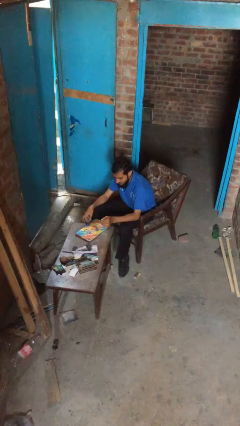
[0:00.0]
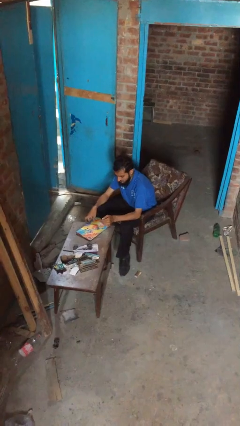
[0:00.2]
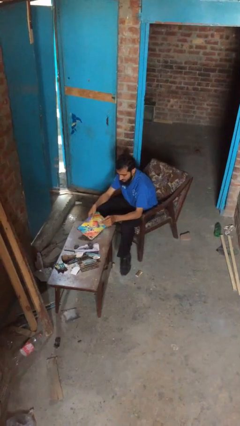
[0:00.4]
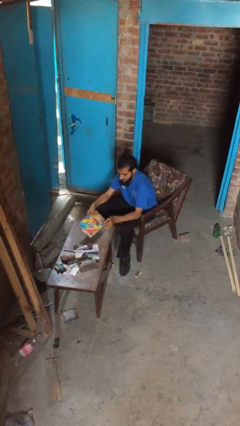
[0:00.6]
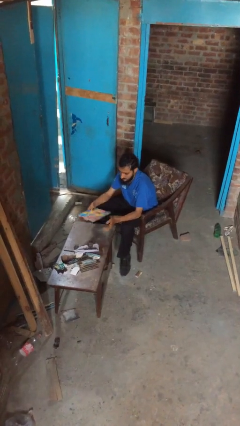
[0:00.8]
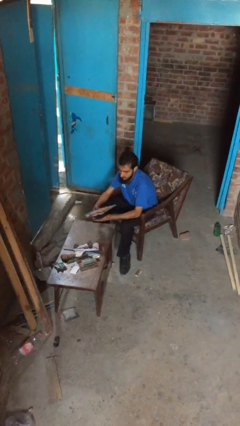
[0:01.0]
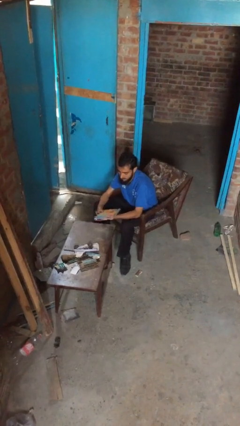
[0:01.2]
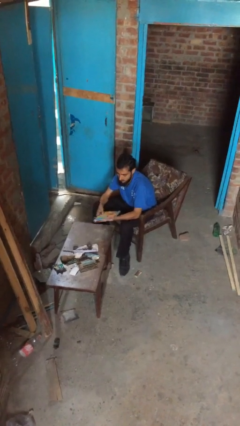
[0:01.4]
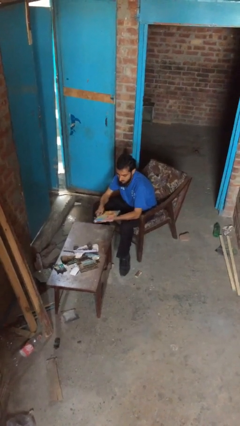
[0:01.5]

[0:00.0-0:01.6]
person picks up object from table

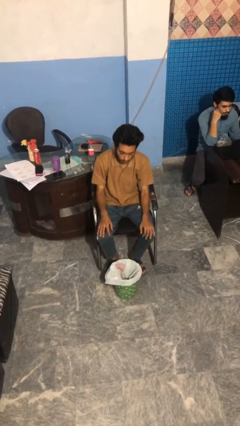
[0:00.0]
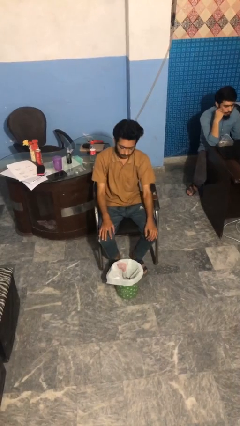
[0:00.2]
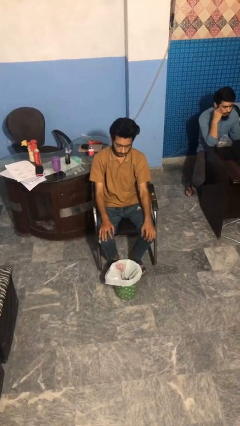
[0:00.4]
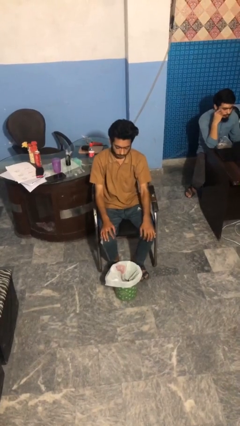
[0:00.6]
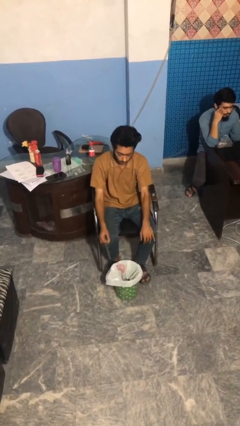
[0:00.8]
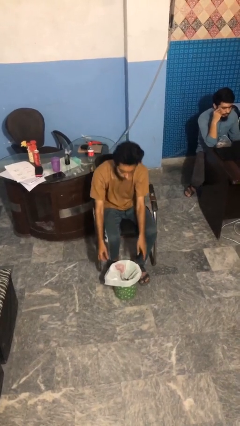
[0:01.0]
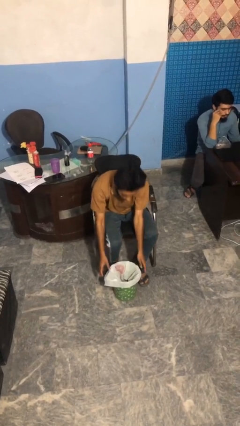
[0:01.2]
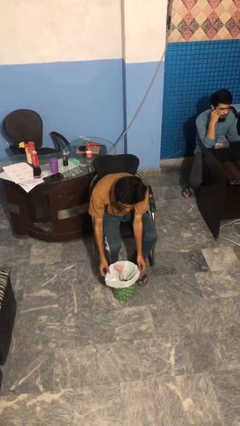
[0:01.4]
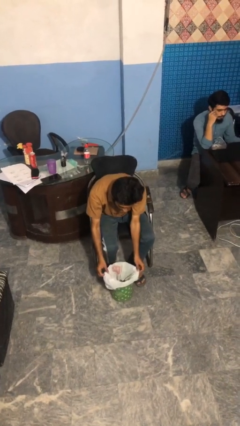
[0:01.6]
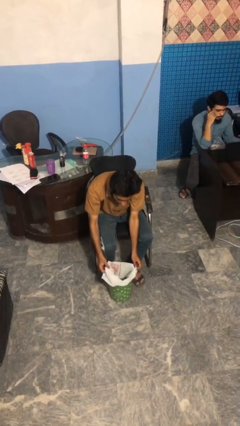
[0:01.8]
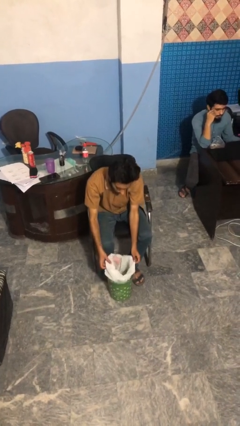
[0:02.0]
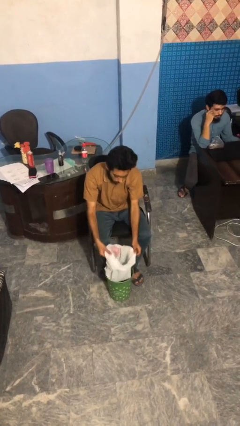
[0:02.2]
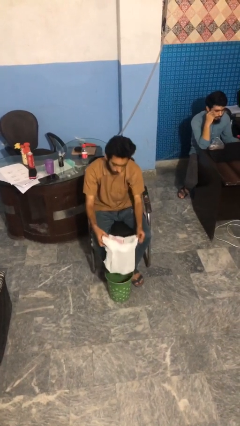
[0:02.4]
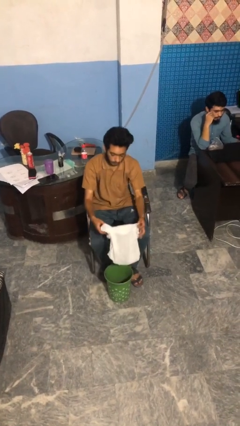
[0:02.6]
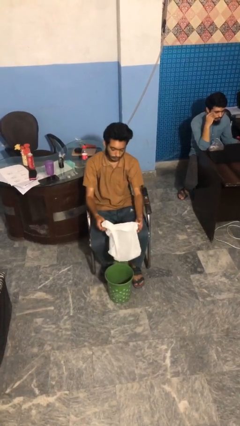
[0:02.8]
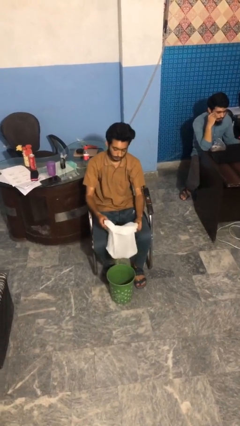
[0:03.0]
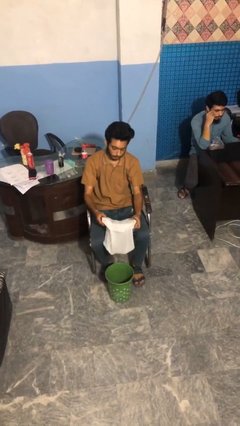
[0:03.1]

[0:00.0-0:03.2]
person removes trashbag from trashcan

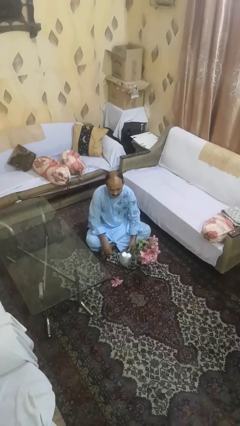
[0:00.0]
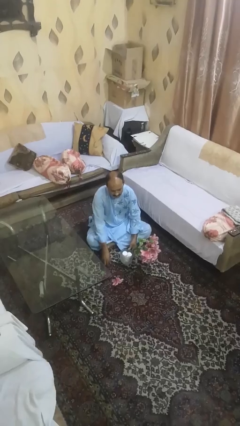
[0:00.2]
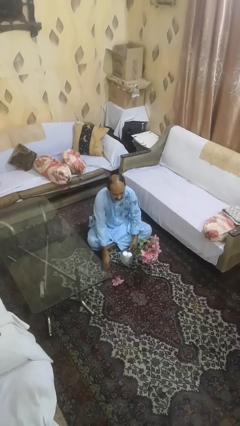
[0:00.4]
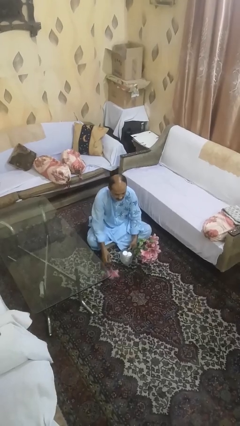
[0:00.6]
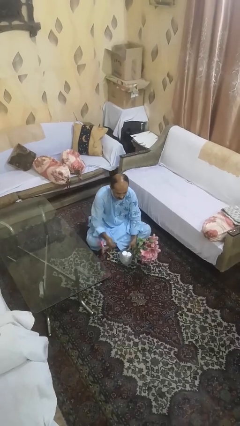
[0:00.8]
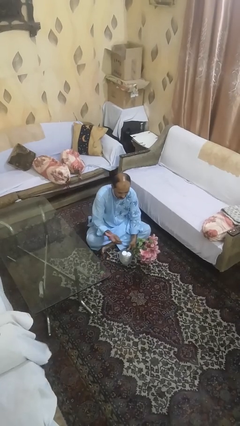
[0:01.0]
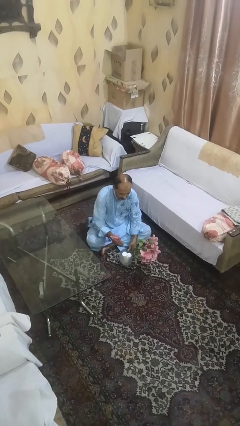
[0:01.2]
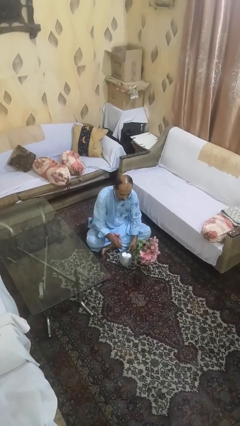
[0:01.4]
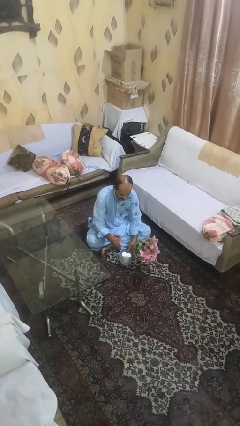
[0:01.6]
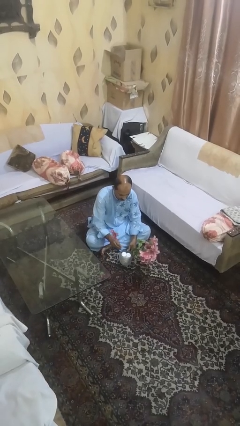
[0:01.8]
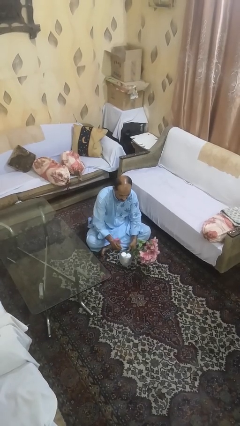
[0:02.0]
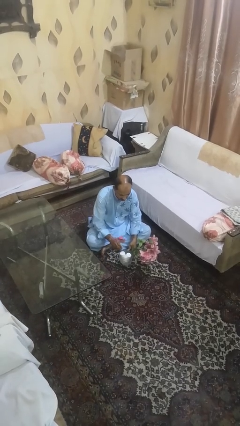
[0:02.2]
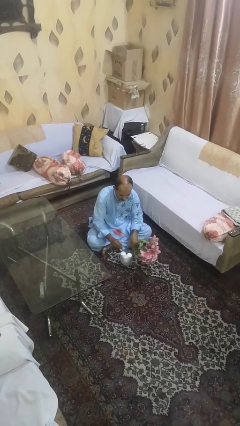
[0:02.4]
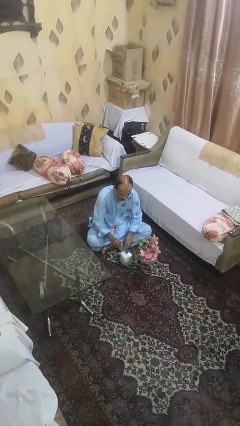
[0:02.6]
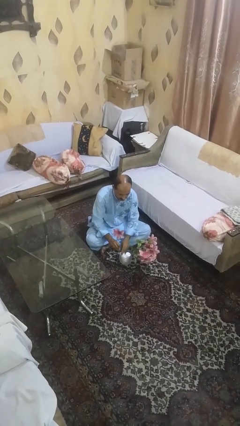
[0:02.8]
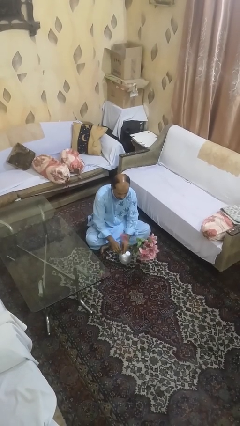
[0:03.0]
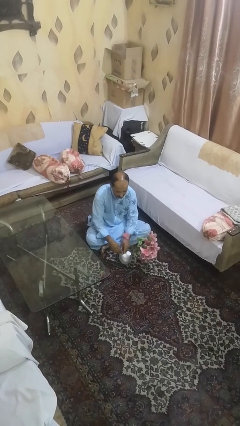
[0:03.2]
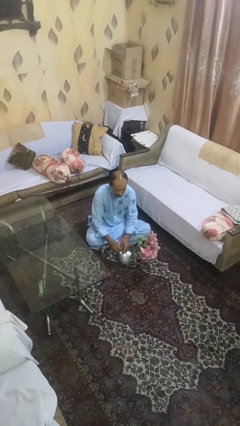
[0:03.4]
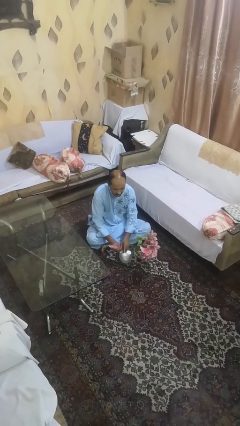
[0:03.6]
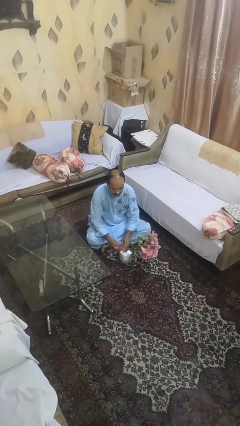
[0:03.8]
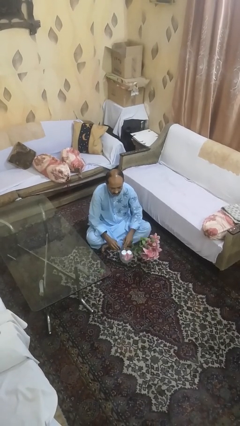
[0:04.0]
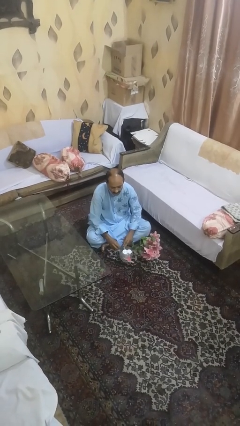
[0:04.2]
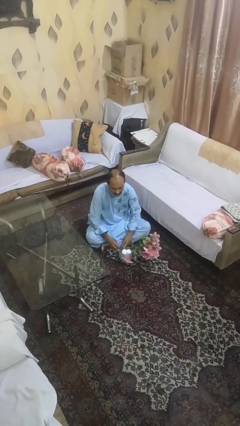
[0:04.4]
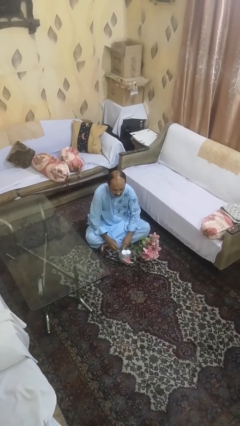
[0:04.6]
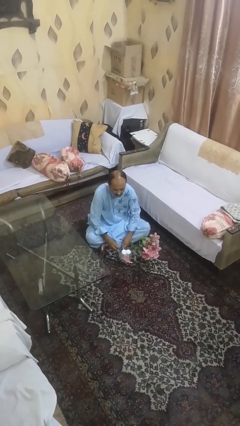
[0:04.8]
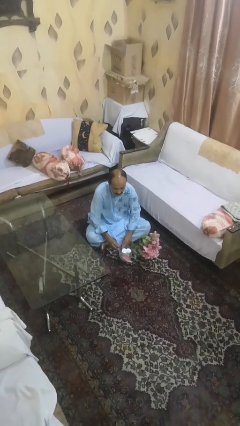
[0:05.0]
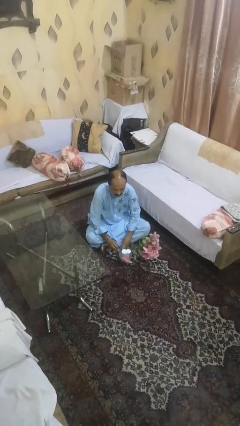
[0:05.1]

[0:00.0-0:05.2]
person arranges flowers in vase

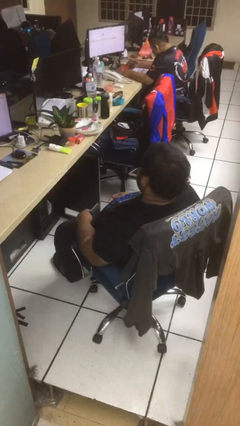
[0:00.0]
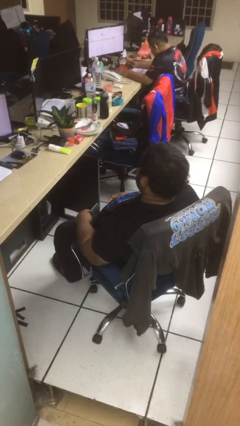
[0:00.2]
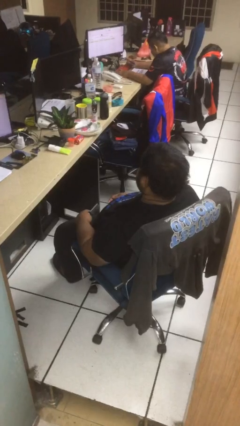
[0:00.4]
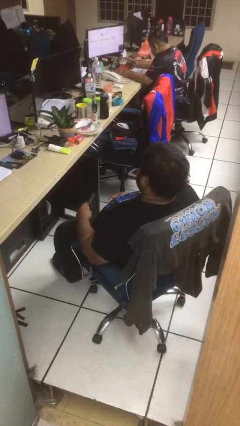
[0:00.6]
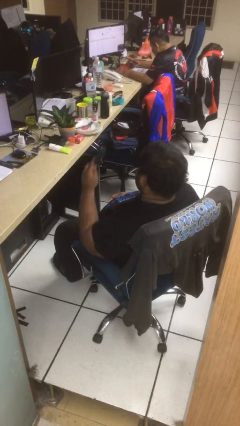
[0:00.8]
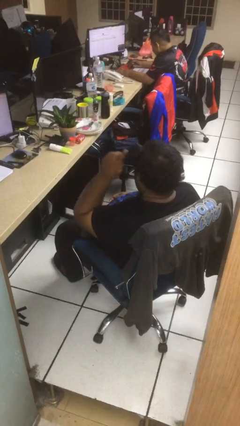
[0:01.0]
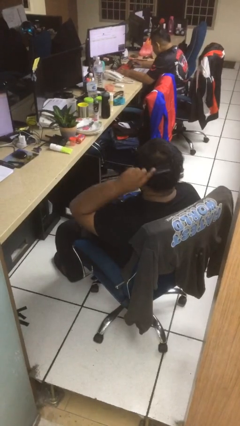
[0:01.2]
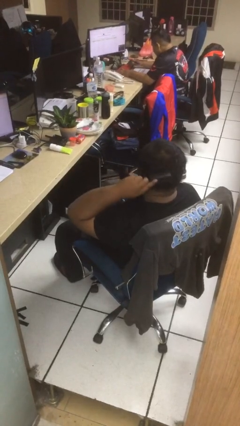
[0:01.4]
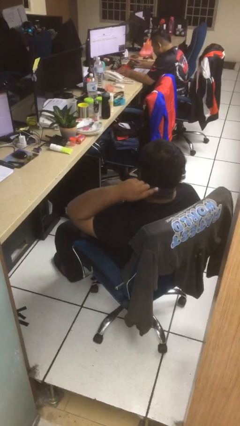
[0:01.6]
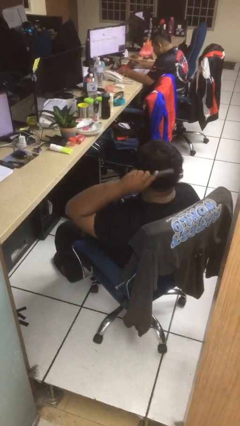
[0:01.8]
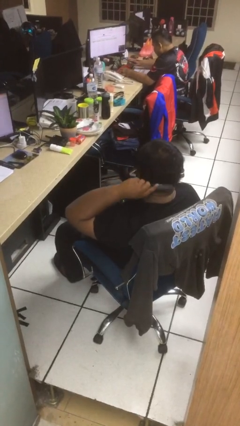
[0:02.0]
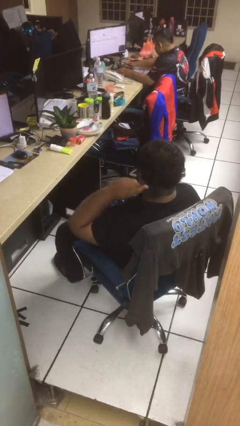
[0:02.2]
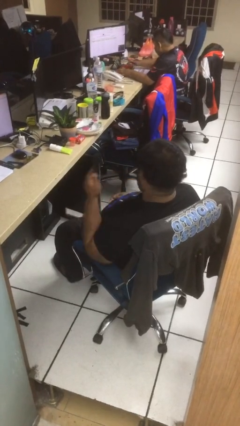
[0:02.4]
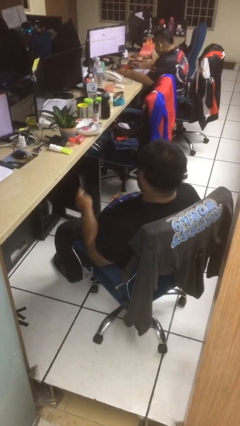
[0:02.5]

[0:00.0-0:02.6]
person brushes hair

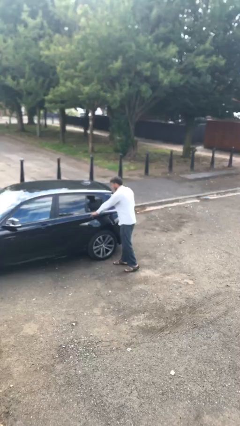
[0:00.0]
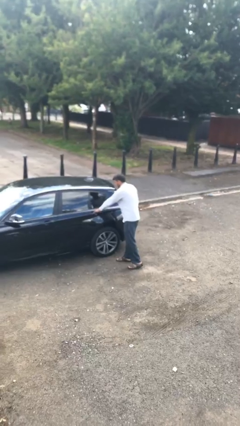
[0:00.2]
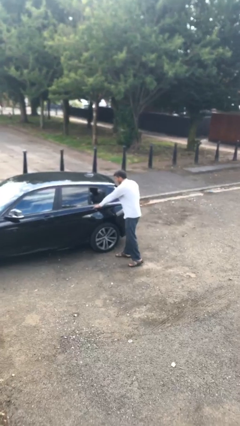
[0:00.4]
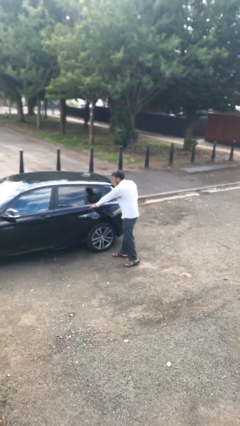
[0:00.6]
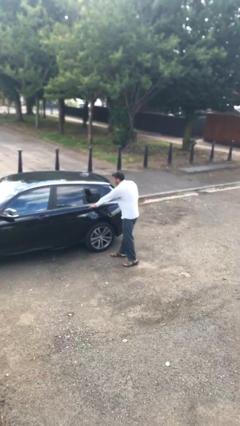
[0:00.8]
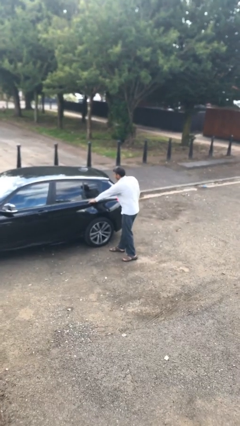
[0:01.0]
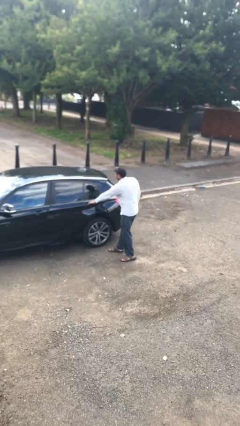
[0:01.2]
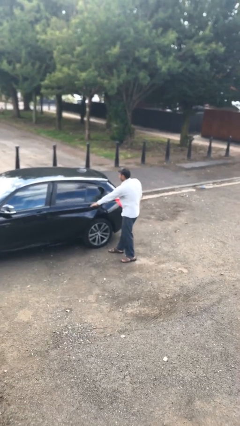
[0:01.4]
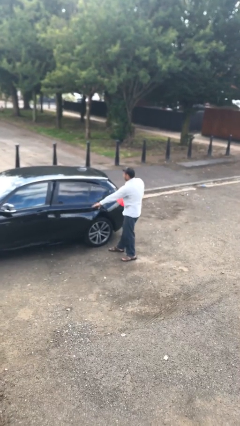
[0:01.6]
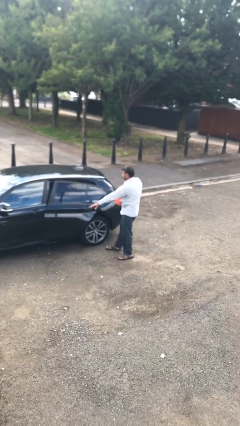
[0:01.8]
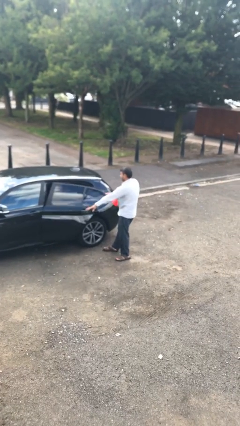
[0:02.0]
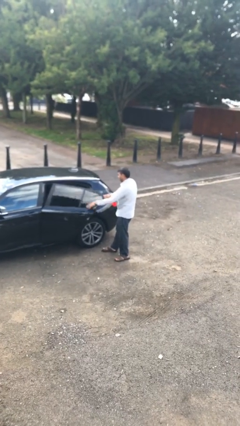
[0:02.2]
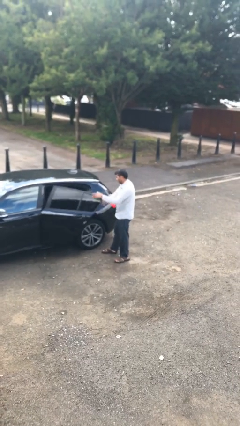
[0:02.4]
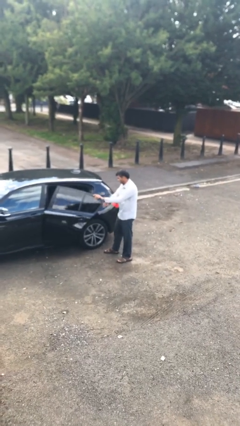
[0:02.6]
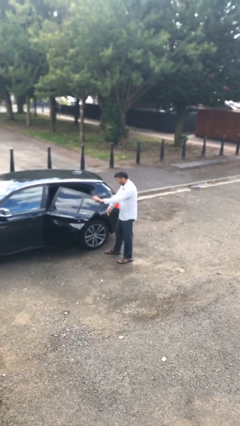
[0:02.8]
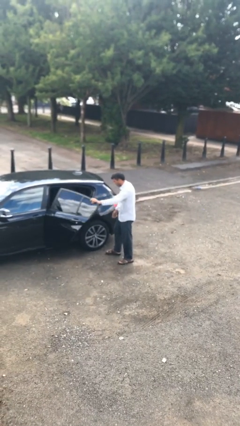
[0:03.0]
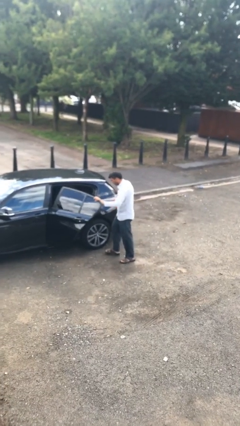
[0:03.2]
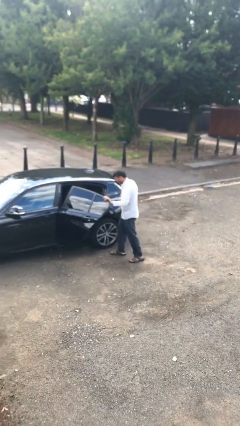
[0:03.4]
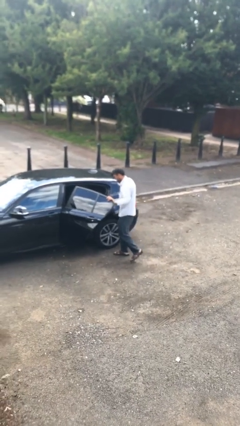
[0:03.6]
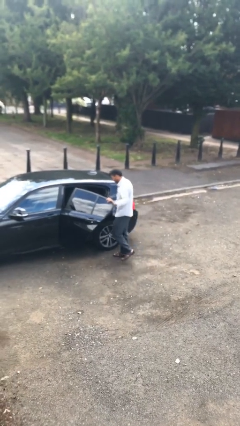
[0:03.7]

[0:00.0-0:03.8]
person opens car door

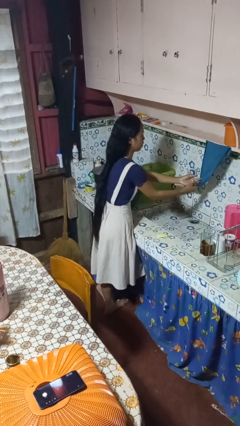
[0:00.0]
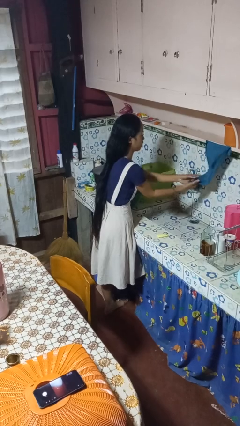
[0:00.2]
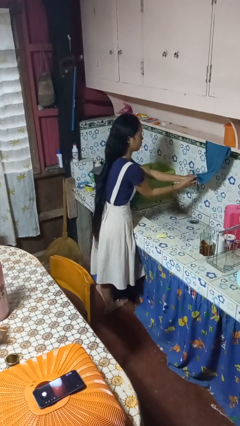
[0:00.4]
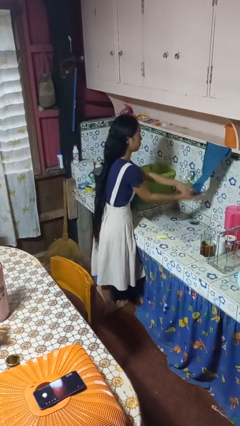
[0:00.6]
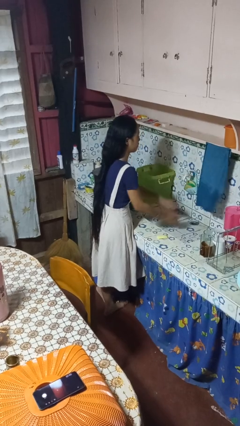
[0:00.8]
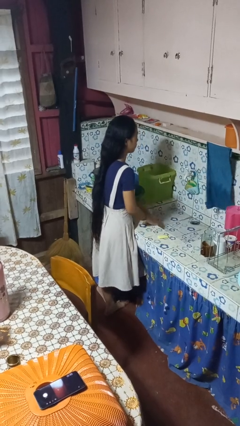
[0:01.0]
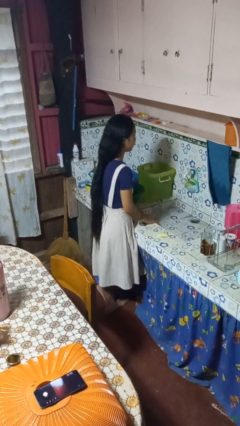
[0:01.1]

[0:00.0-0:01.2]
person dries hands with towel

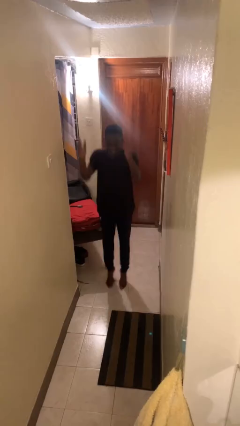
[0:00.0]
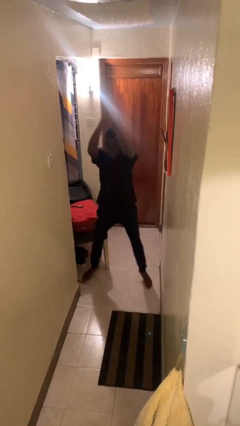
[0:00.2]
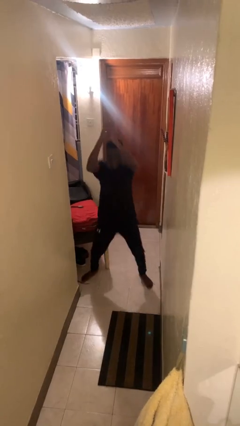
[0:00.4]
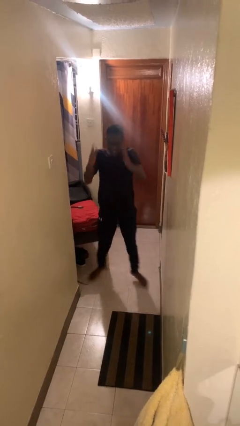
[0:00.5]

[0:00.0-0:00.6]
person exercises with jumping jacks
